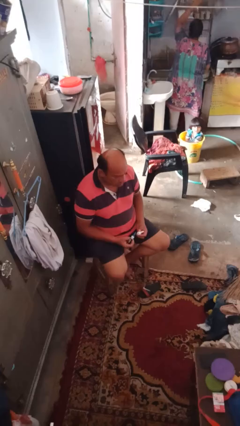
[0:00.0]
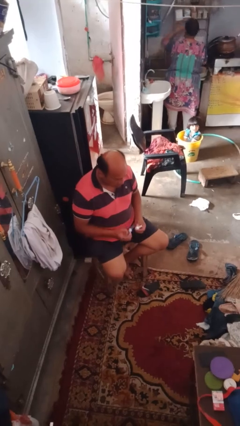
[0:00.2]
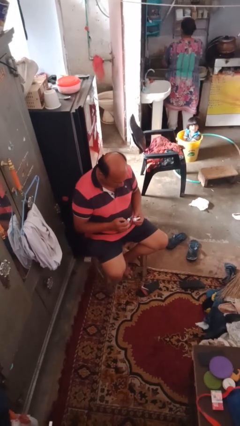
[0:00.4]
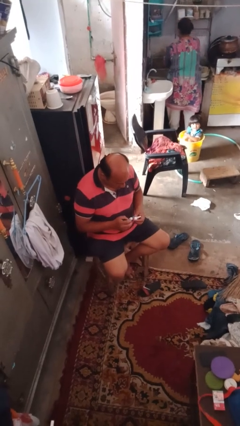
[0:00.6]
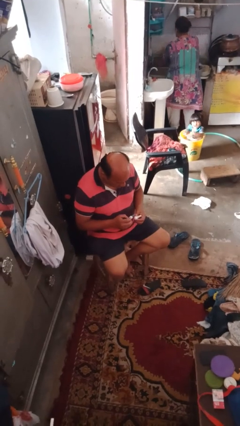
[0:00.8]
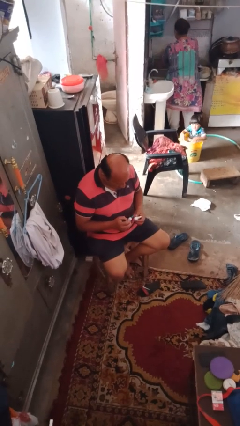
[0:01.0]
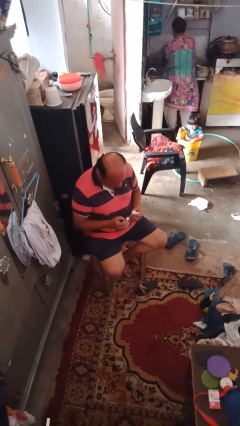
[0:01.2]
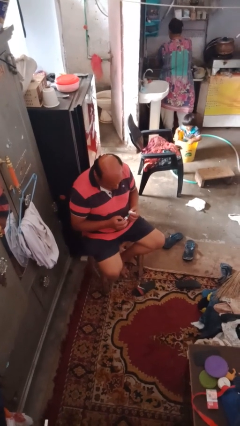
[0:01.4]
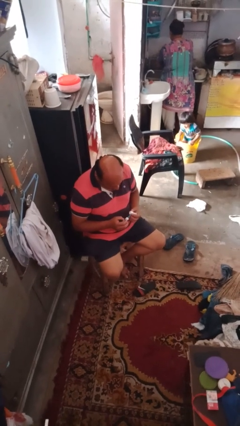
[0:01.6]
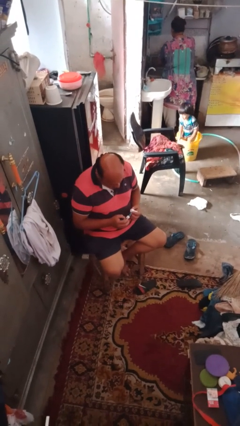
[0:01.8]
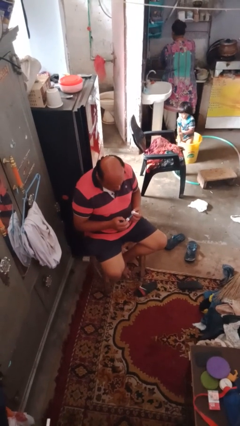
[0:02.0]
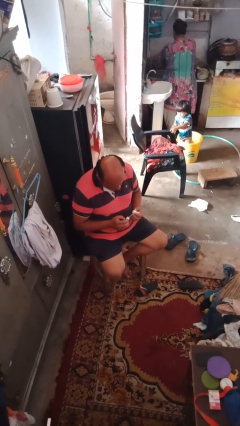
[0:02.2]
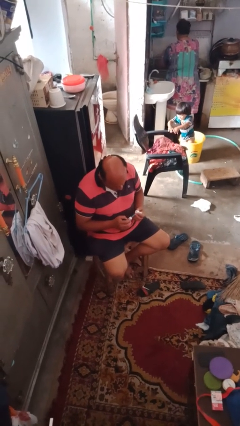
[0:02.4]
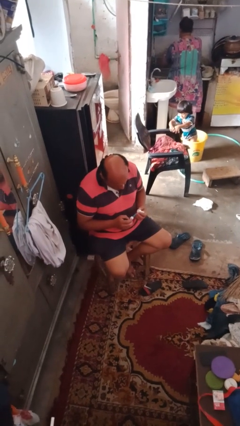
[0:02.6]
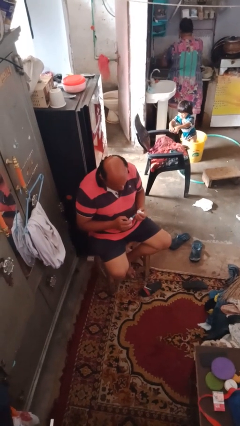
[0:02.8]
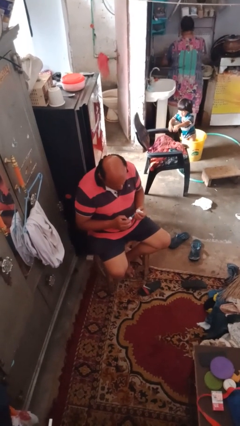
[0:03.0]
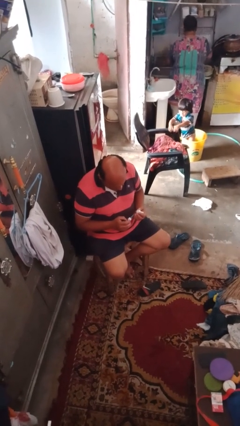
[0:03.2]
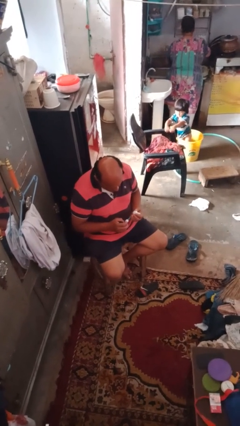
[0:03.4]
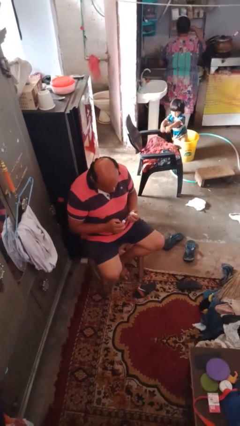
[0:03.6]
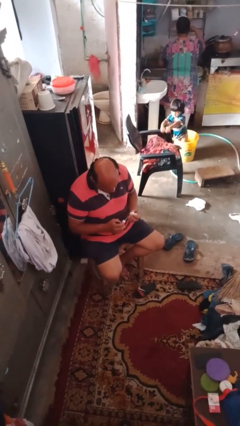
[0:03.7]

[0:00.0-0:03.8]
person paints fingernails

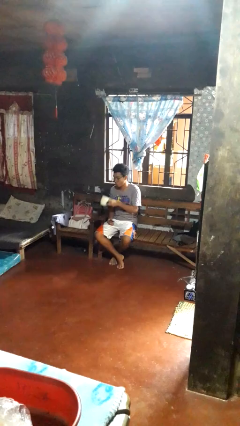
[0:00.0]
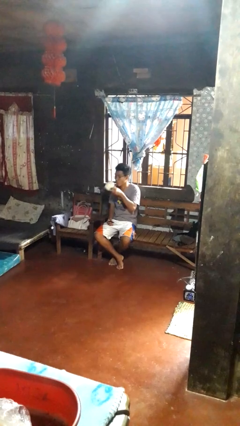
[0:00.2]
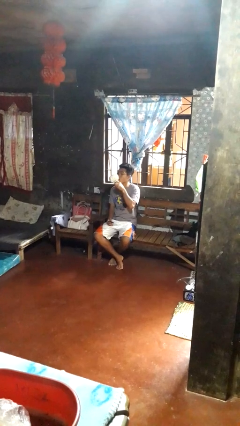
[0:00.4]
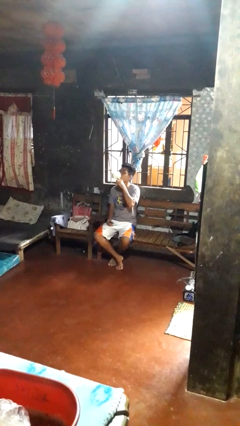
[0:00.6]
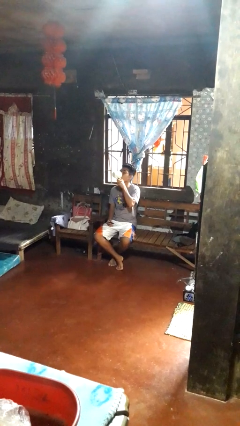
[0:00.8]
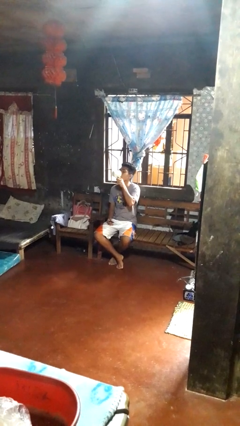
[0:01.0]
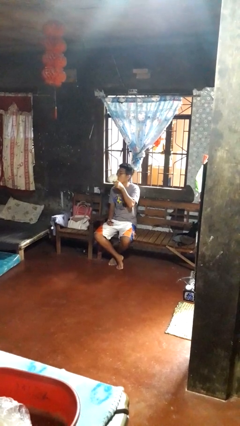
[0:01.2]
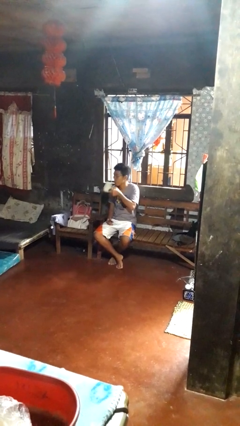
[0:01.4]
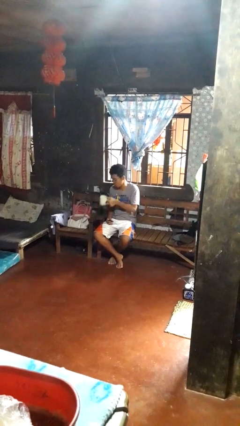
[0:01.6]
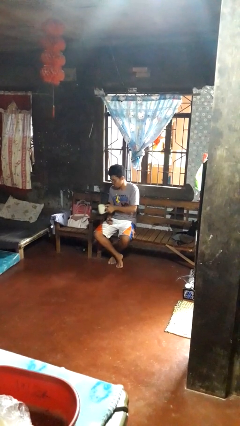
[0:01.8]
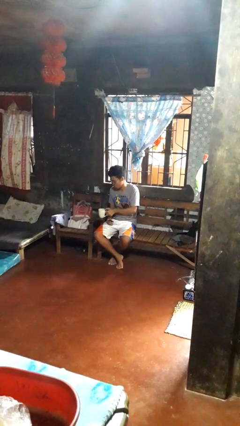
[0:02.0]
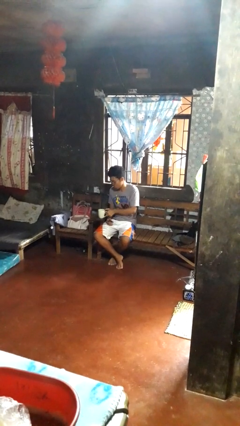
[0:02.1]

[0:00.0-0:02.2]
person drinks from cup

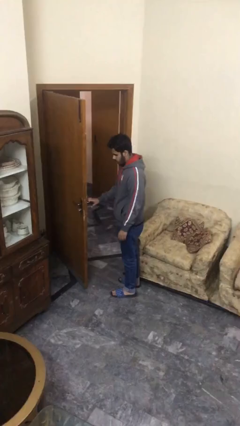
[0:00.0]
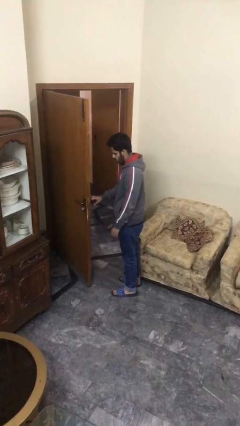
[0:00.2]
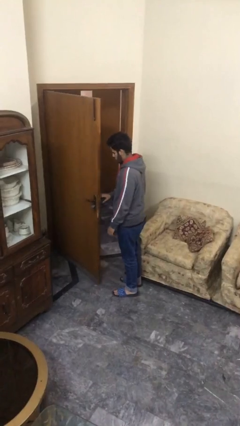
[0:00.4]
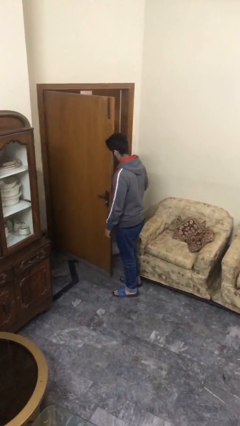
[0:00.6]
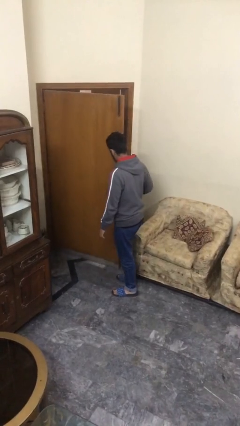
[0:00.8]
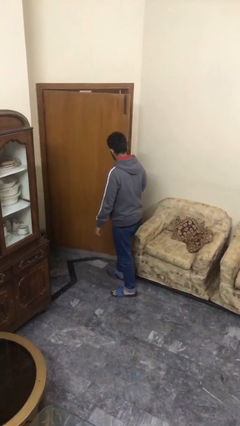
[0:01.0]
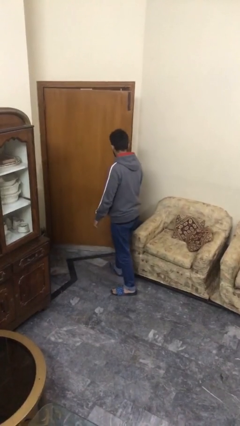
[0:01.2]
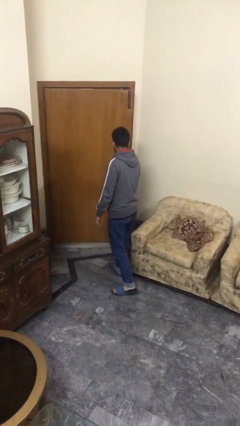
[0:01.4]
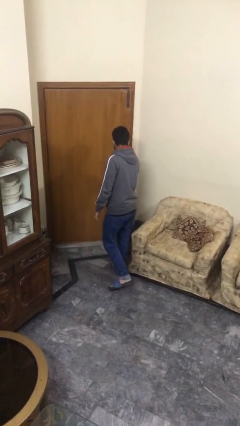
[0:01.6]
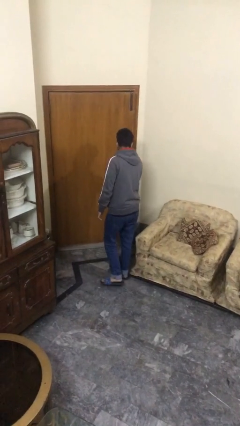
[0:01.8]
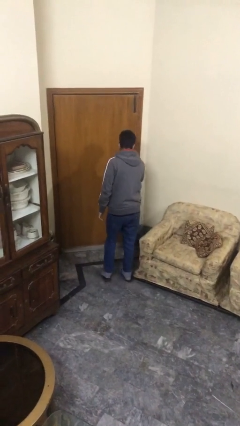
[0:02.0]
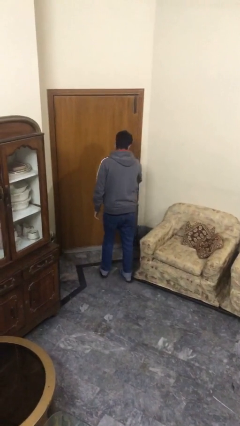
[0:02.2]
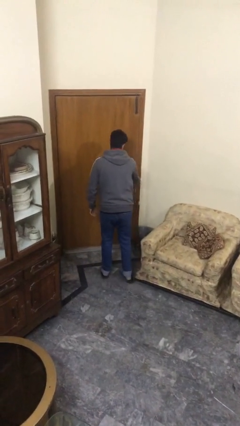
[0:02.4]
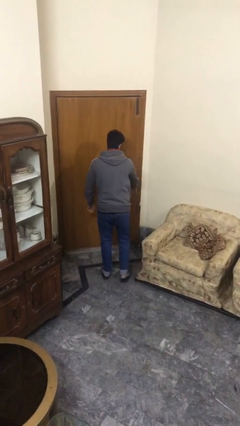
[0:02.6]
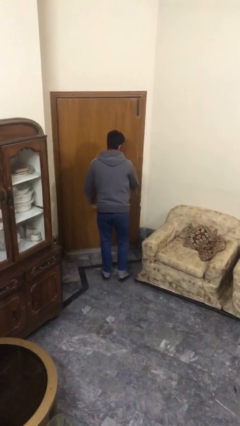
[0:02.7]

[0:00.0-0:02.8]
person closes facility door

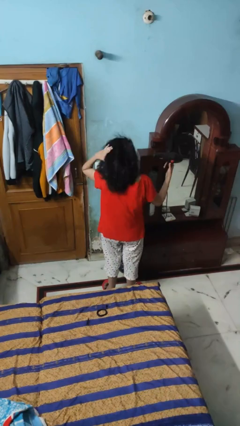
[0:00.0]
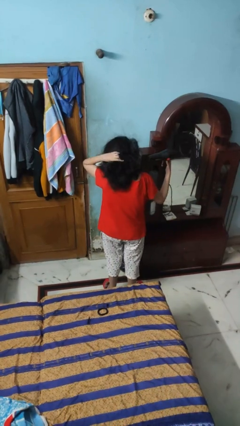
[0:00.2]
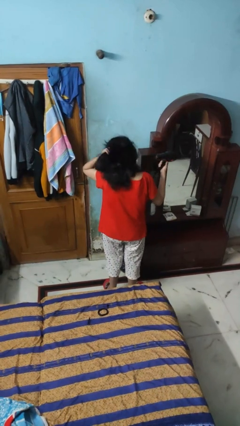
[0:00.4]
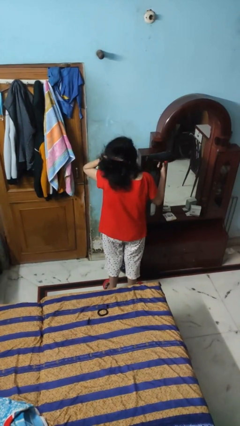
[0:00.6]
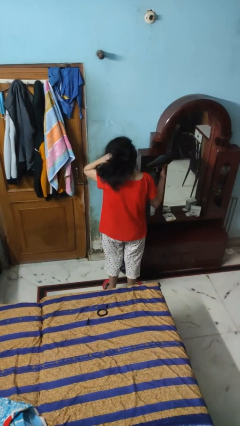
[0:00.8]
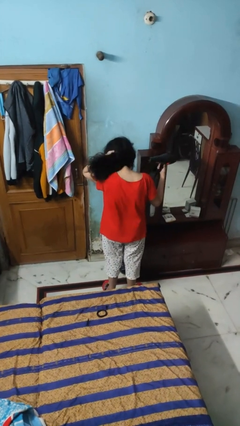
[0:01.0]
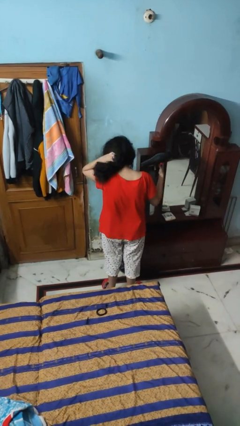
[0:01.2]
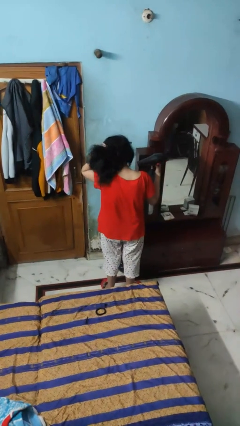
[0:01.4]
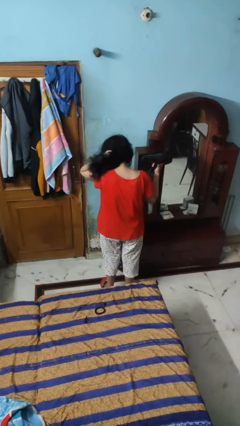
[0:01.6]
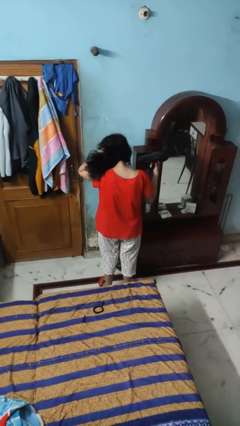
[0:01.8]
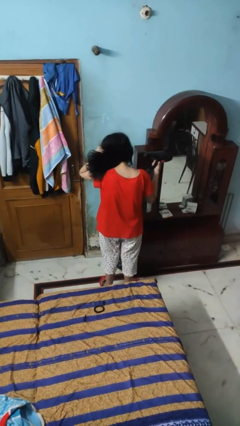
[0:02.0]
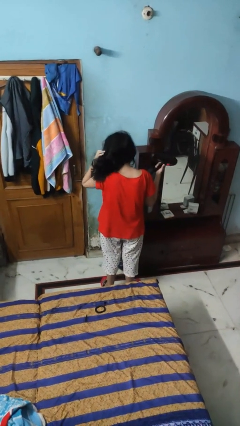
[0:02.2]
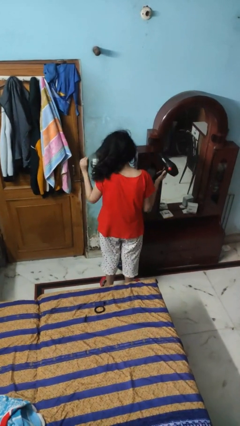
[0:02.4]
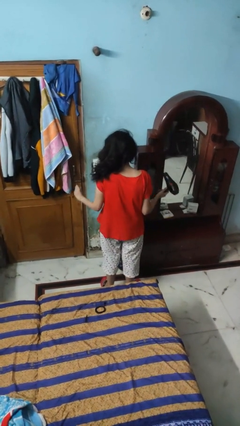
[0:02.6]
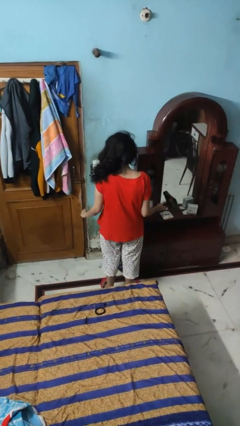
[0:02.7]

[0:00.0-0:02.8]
person dries hair with hairdryer

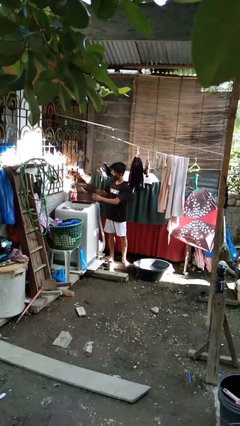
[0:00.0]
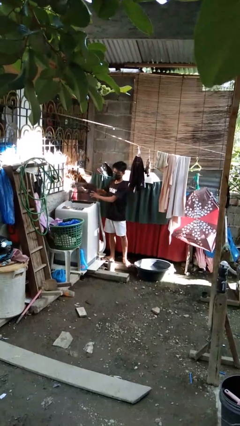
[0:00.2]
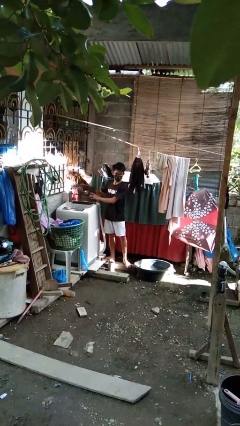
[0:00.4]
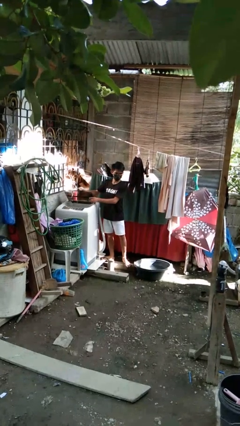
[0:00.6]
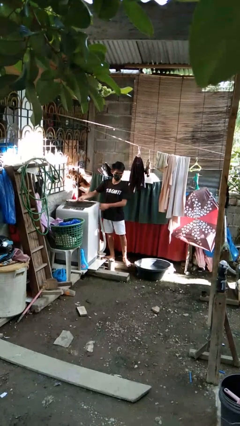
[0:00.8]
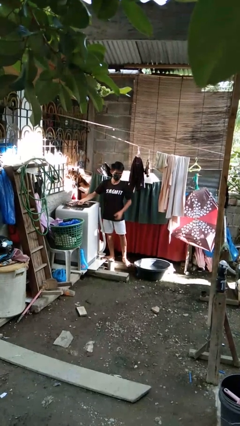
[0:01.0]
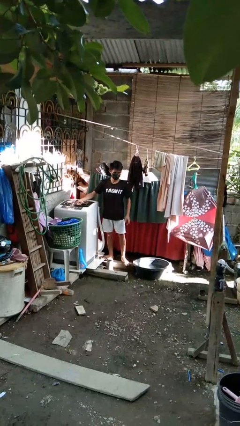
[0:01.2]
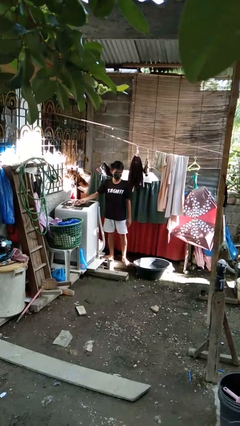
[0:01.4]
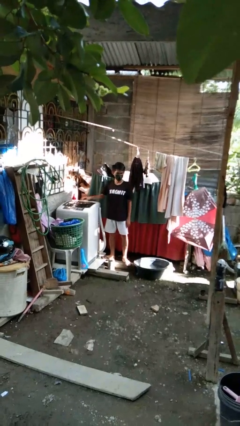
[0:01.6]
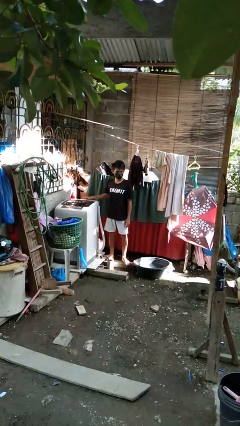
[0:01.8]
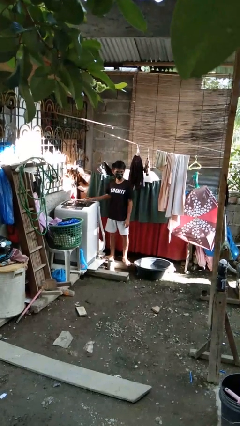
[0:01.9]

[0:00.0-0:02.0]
person closes clothes washer

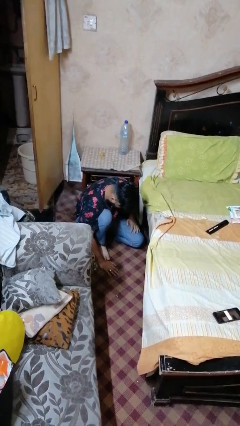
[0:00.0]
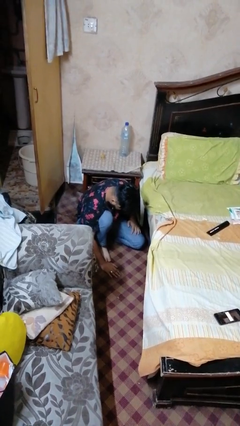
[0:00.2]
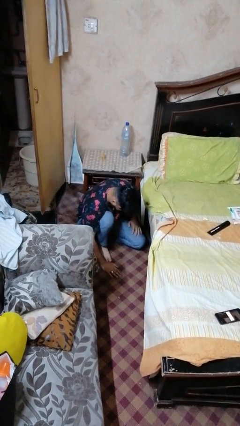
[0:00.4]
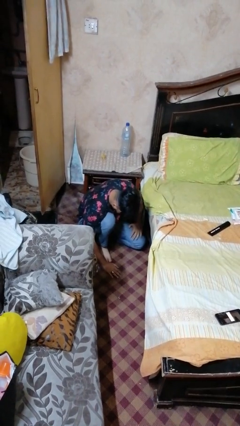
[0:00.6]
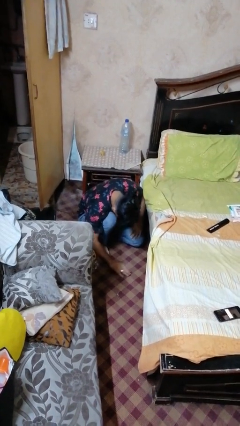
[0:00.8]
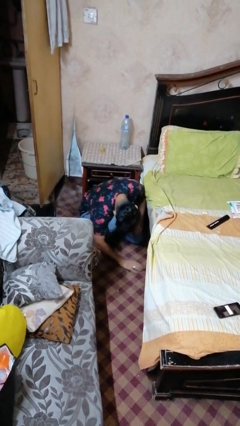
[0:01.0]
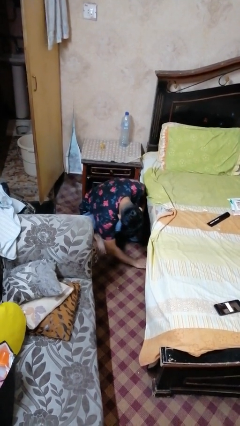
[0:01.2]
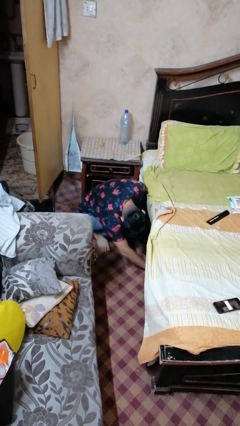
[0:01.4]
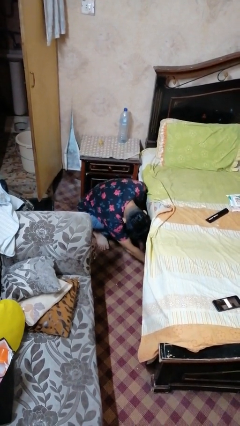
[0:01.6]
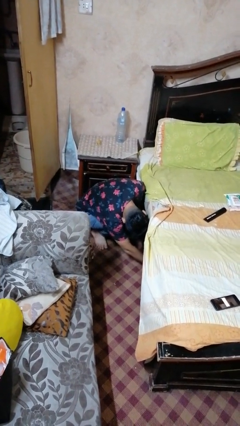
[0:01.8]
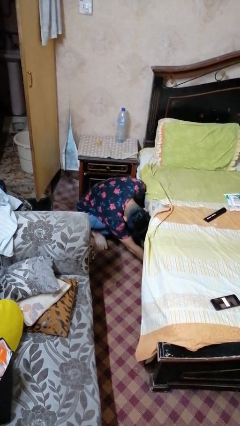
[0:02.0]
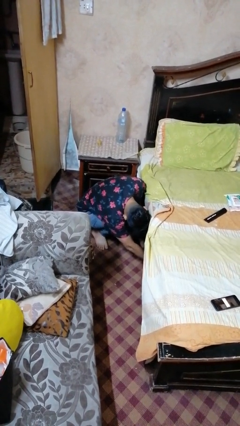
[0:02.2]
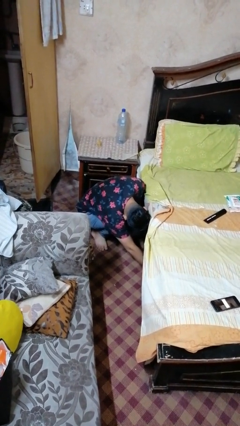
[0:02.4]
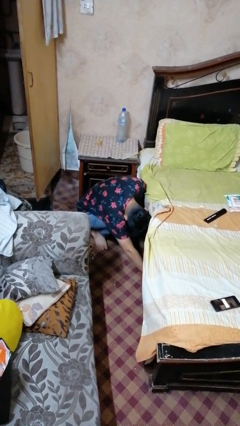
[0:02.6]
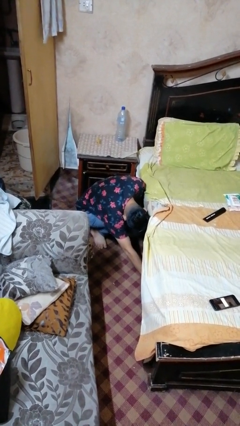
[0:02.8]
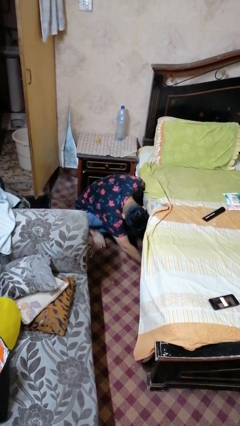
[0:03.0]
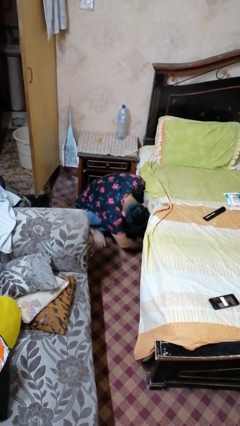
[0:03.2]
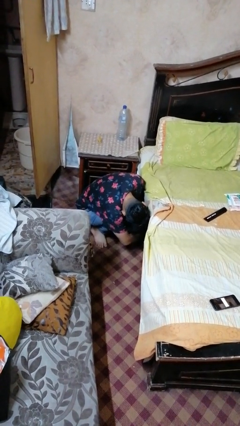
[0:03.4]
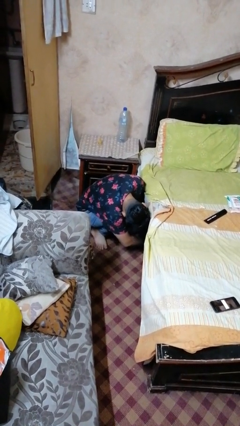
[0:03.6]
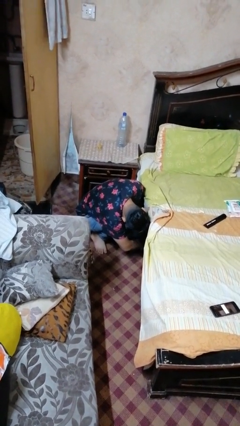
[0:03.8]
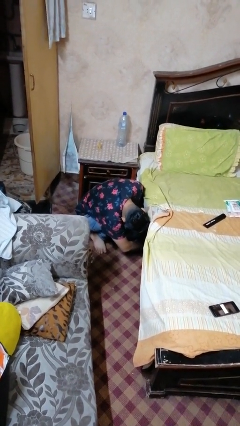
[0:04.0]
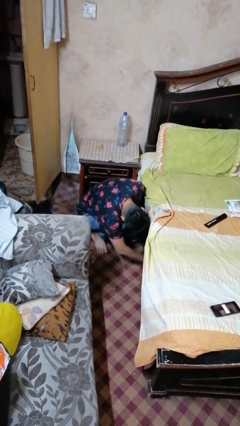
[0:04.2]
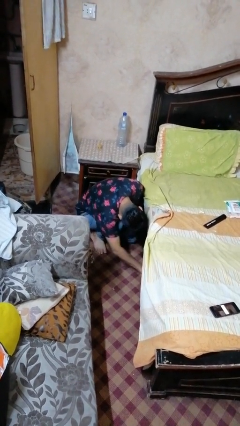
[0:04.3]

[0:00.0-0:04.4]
person searches under bed
